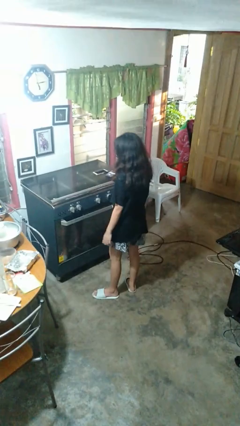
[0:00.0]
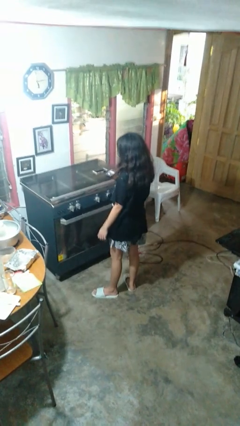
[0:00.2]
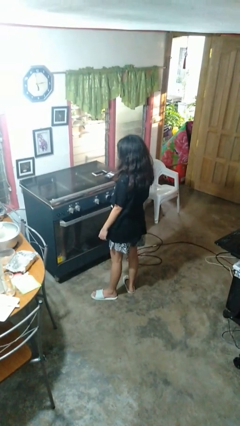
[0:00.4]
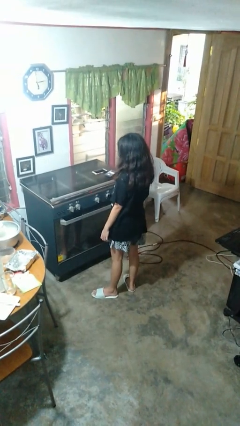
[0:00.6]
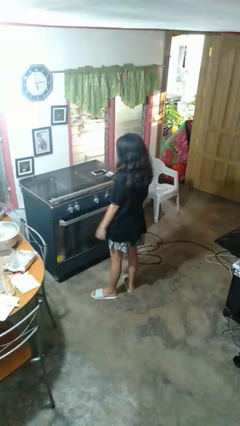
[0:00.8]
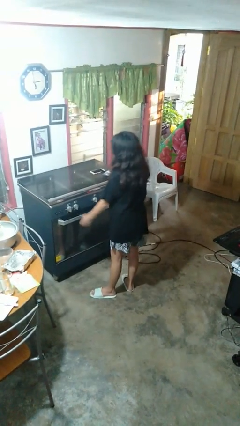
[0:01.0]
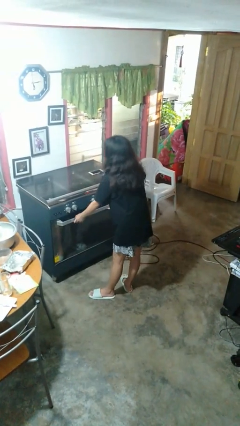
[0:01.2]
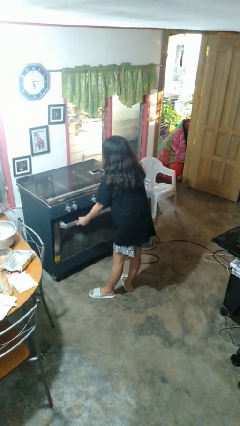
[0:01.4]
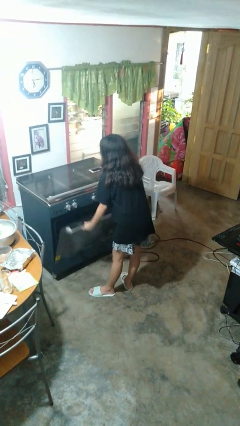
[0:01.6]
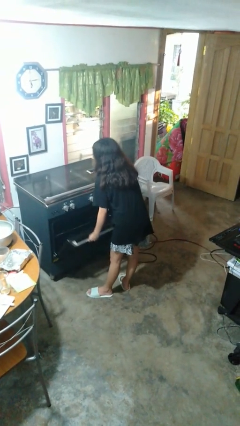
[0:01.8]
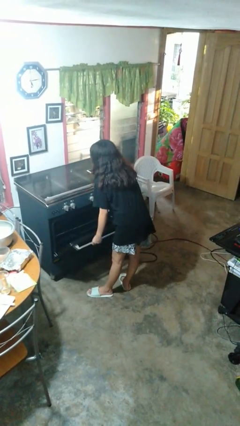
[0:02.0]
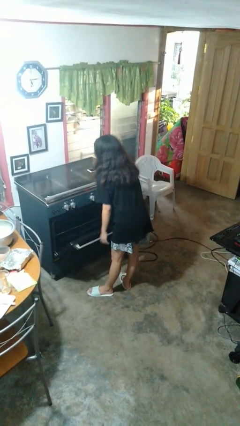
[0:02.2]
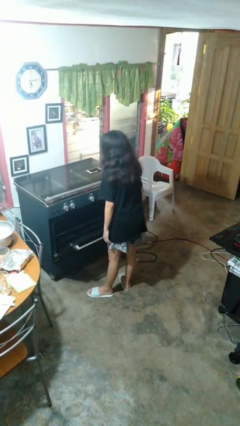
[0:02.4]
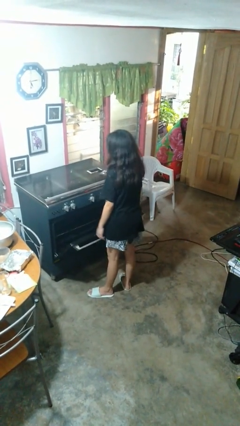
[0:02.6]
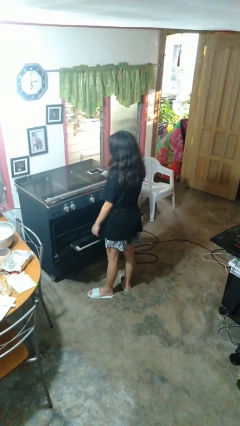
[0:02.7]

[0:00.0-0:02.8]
person opens oven door

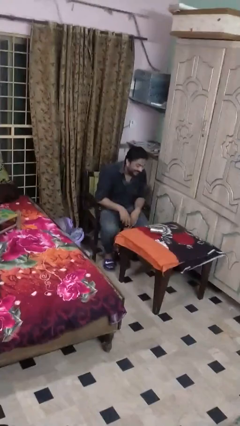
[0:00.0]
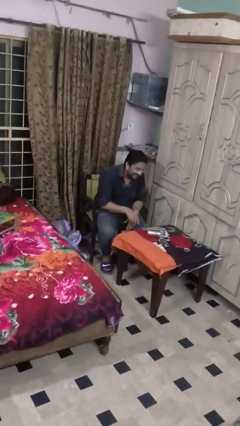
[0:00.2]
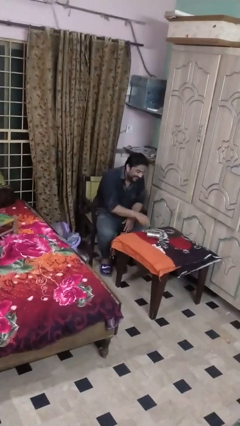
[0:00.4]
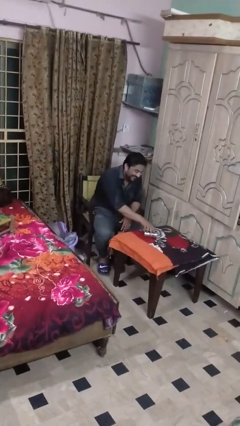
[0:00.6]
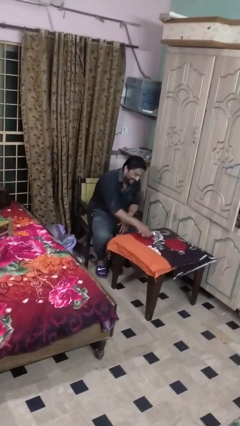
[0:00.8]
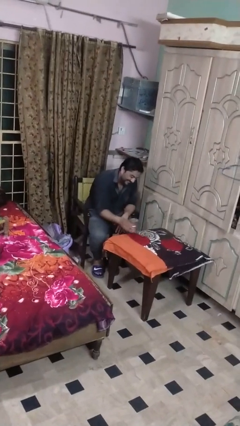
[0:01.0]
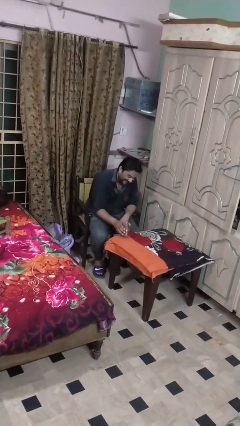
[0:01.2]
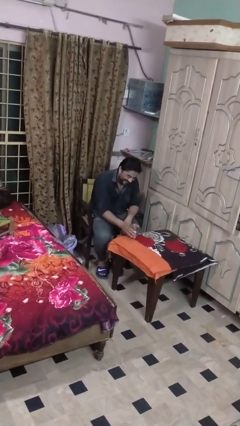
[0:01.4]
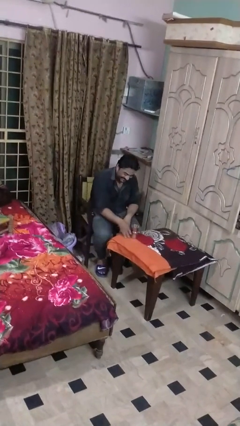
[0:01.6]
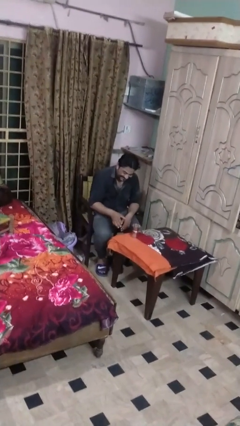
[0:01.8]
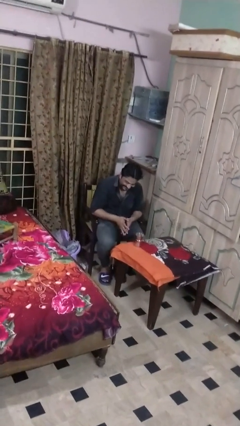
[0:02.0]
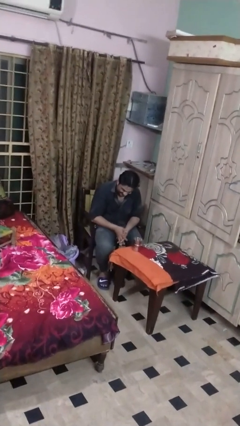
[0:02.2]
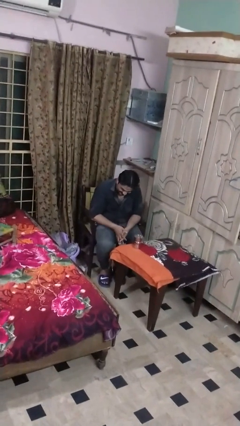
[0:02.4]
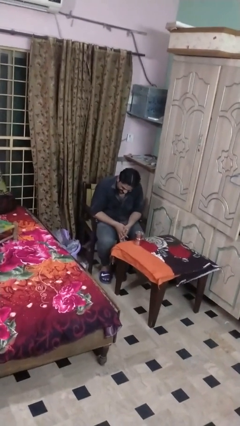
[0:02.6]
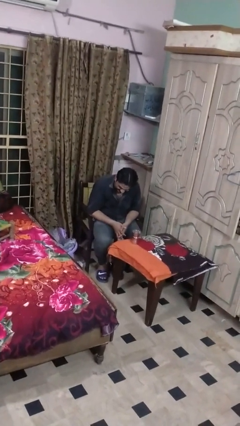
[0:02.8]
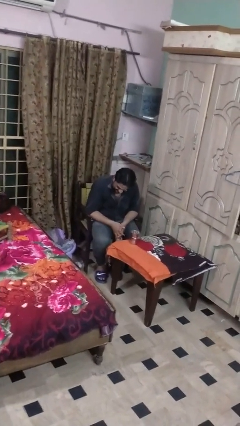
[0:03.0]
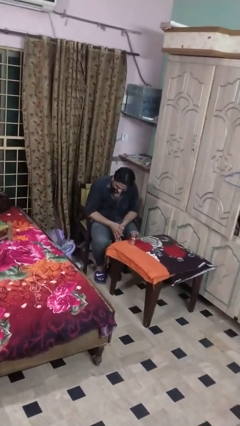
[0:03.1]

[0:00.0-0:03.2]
person sets upright glass

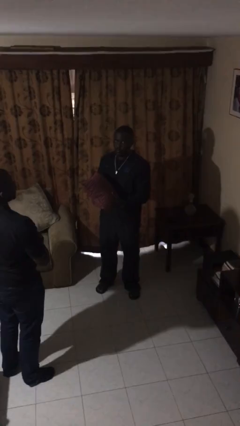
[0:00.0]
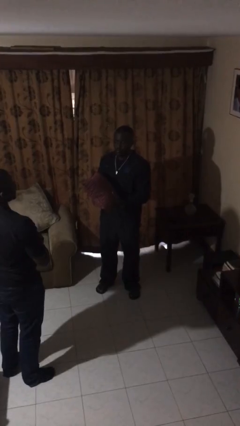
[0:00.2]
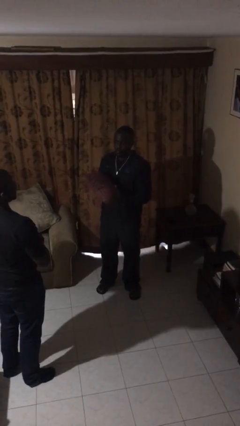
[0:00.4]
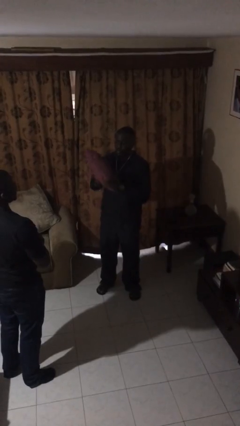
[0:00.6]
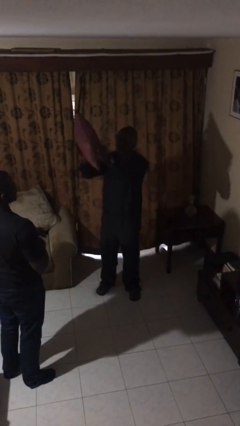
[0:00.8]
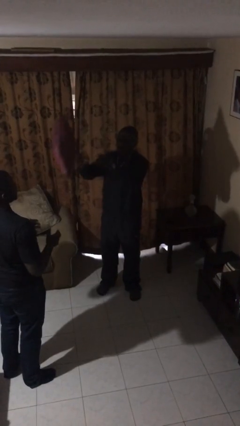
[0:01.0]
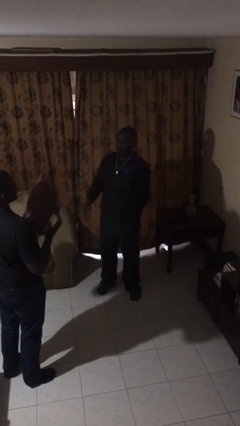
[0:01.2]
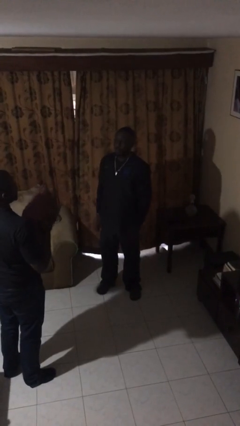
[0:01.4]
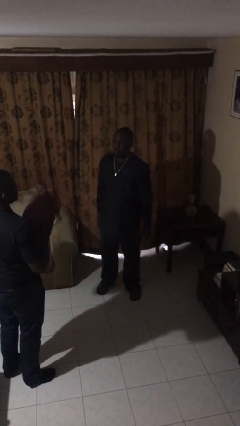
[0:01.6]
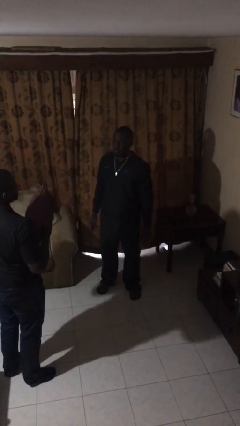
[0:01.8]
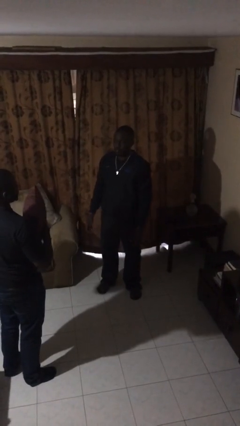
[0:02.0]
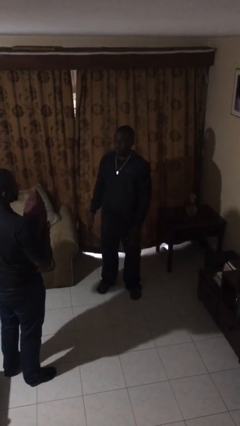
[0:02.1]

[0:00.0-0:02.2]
person throws object to person

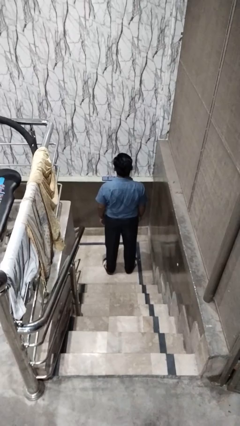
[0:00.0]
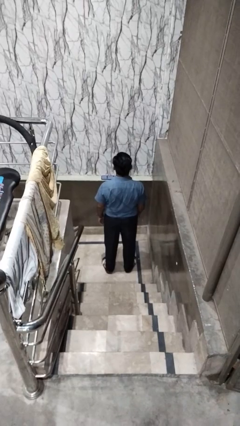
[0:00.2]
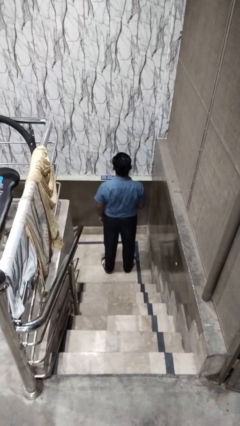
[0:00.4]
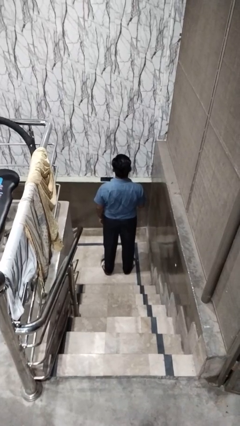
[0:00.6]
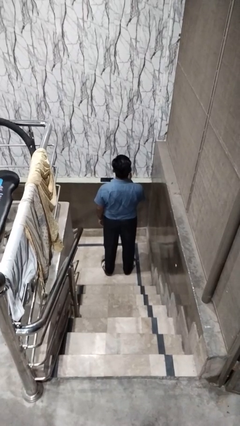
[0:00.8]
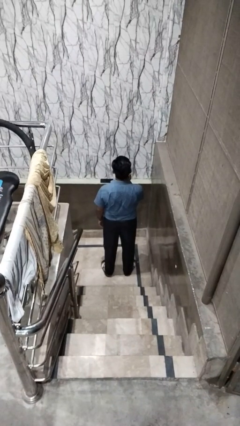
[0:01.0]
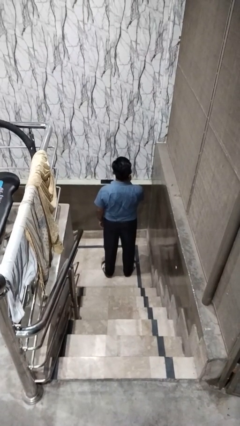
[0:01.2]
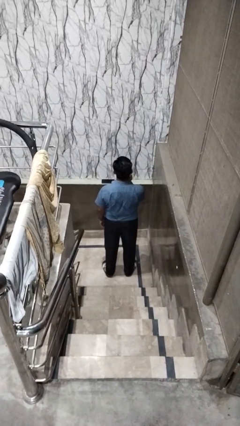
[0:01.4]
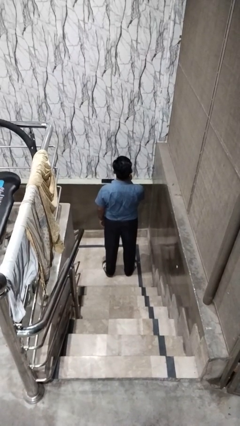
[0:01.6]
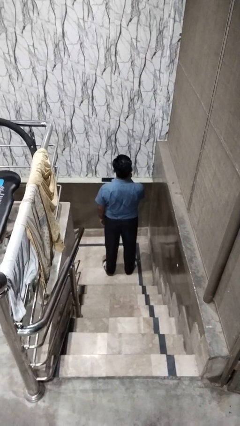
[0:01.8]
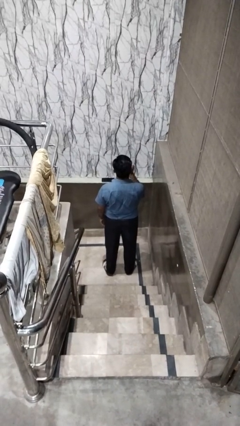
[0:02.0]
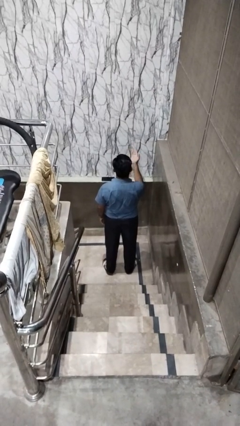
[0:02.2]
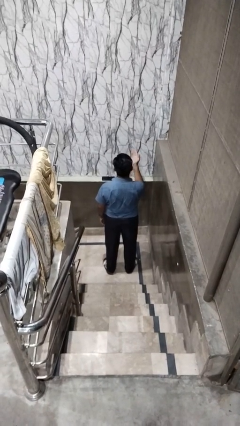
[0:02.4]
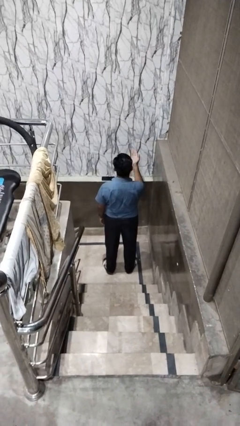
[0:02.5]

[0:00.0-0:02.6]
person gestures blow kiss

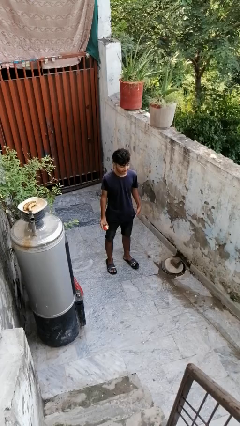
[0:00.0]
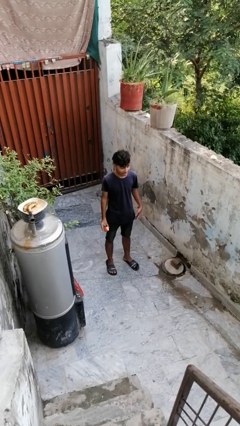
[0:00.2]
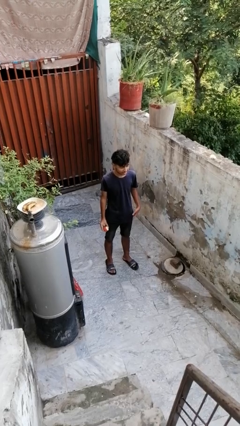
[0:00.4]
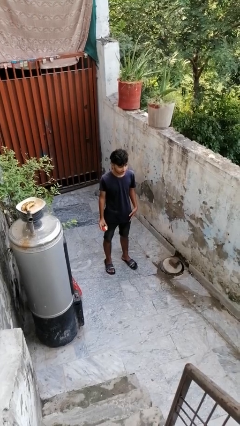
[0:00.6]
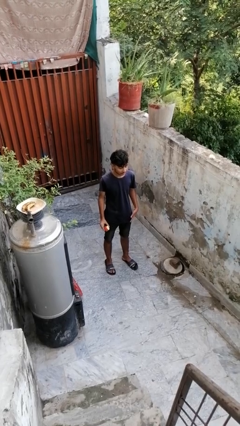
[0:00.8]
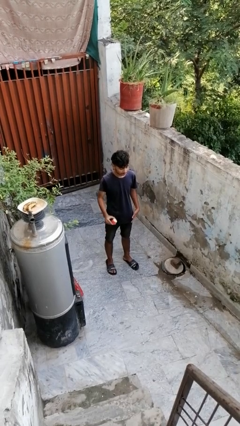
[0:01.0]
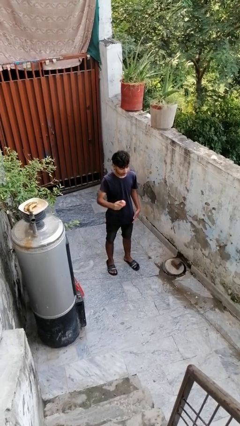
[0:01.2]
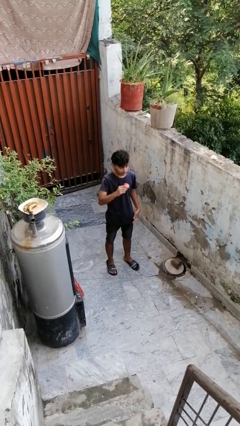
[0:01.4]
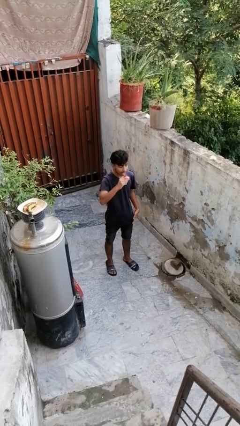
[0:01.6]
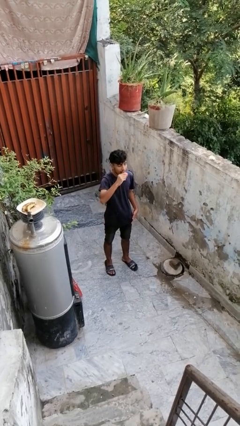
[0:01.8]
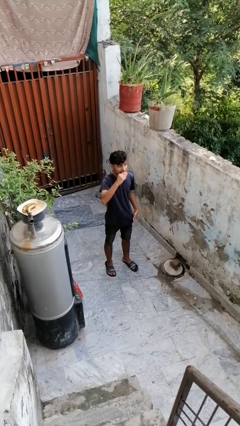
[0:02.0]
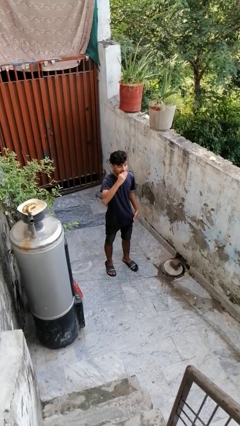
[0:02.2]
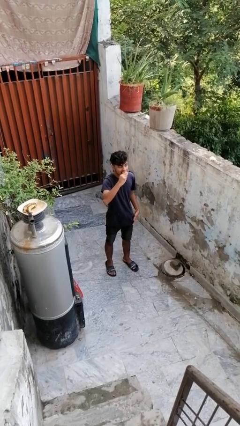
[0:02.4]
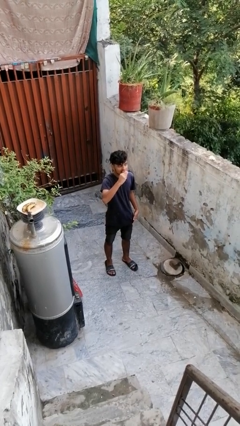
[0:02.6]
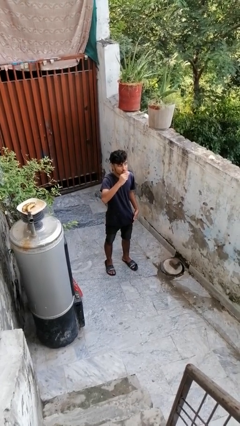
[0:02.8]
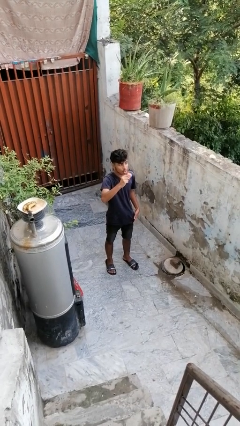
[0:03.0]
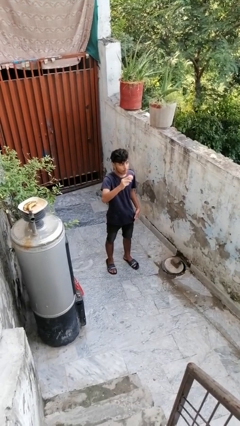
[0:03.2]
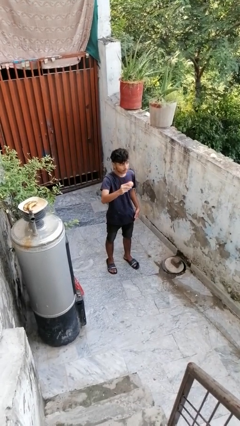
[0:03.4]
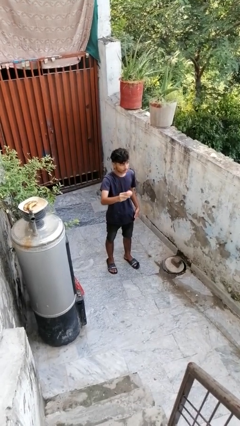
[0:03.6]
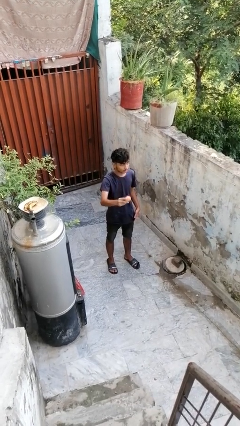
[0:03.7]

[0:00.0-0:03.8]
person eats apple

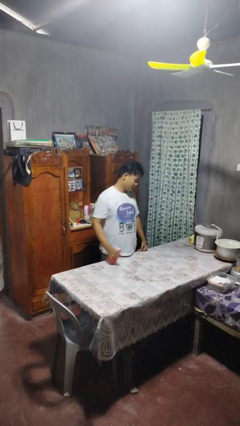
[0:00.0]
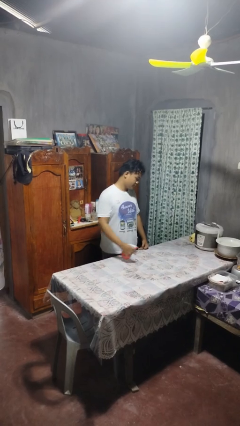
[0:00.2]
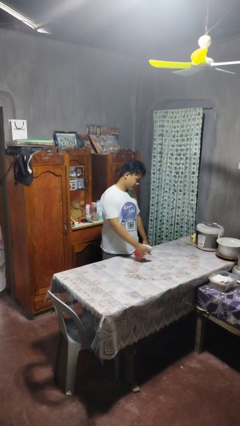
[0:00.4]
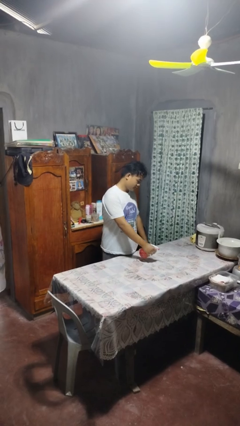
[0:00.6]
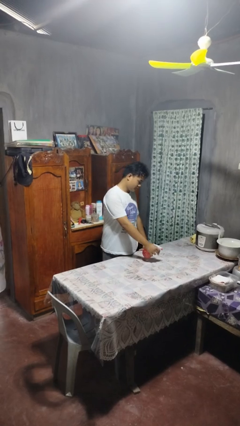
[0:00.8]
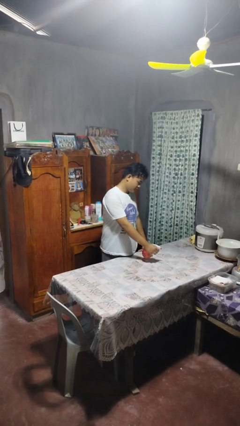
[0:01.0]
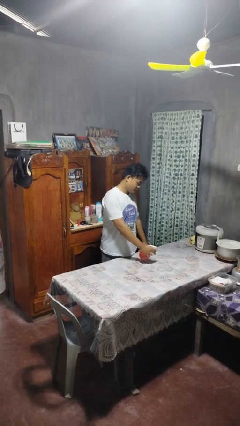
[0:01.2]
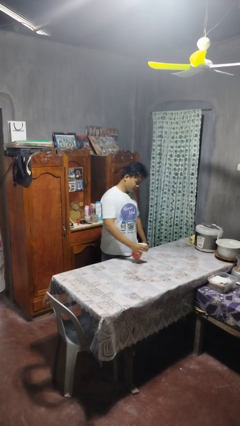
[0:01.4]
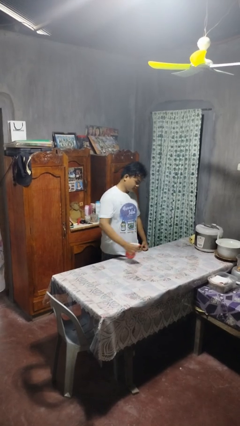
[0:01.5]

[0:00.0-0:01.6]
person sprays from bottle

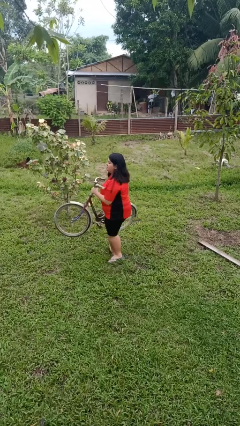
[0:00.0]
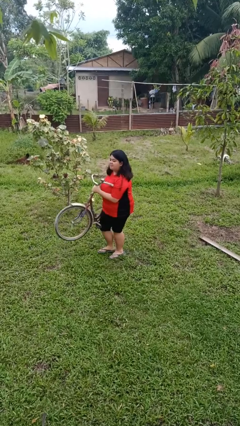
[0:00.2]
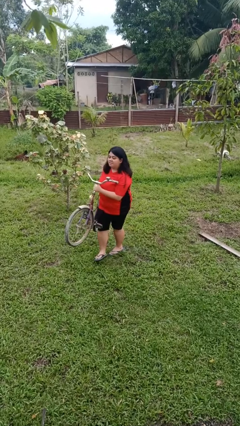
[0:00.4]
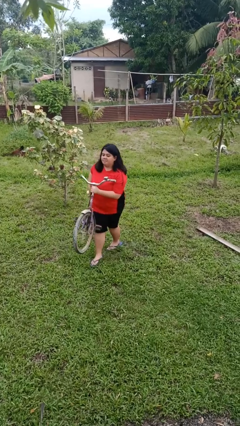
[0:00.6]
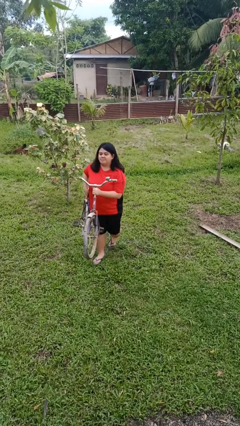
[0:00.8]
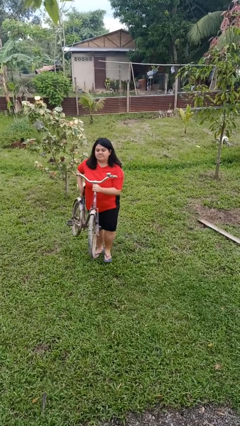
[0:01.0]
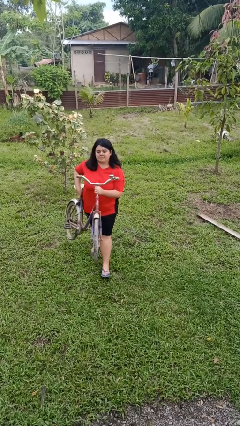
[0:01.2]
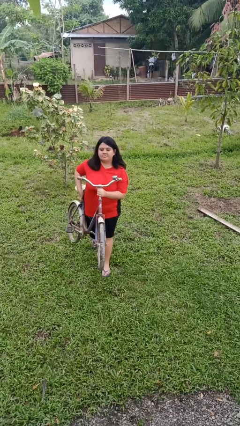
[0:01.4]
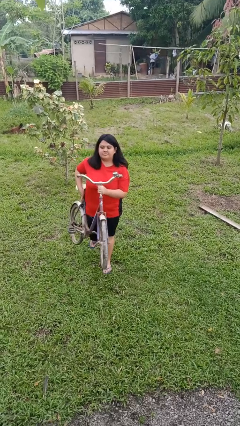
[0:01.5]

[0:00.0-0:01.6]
person carries bicycle
